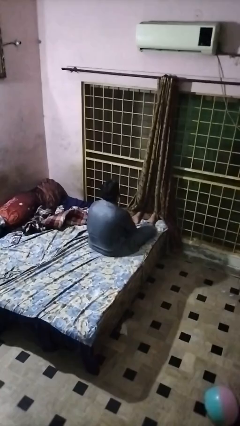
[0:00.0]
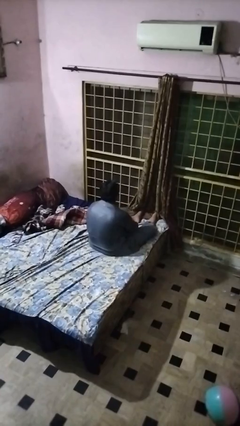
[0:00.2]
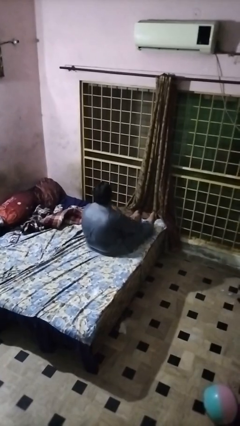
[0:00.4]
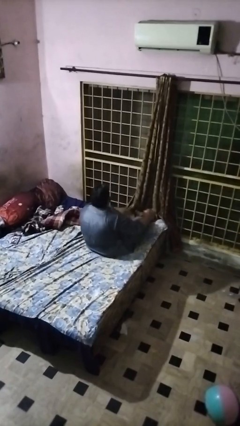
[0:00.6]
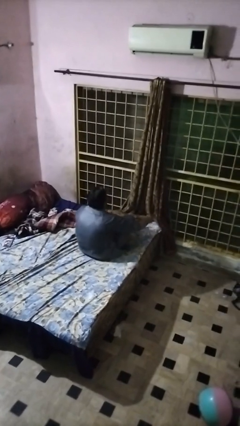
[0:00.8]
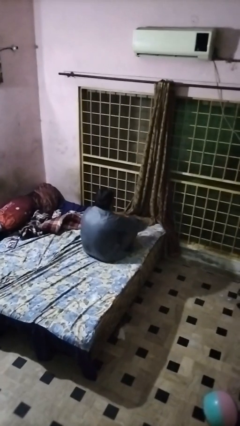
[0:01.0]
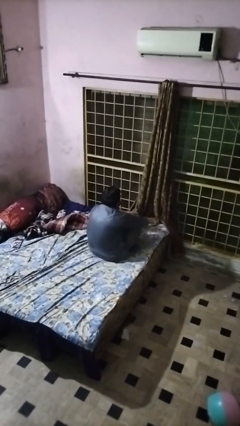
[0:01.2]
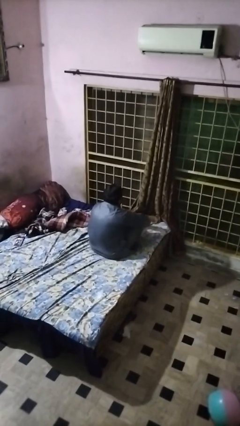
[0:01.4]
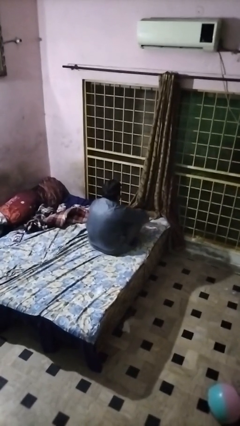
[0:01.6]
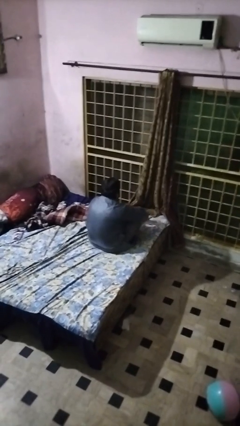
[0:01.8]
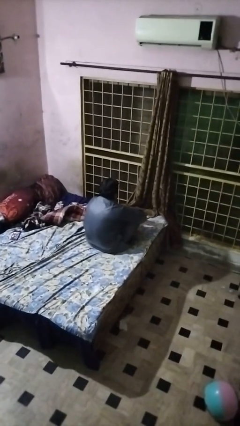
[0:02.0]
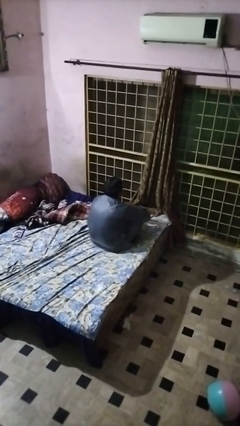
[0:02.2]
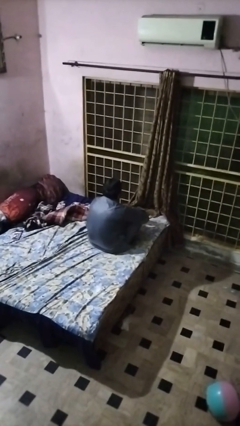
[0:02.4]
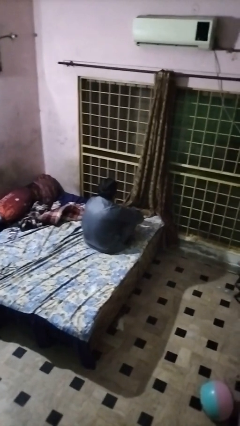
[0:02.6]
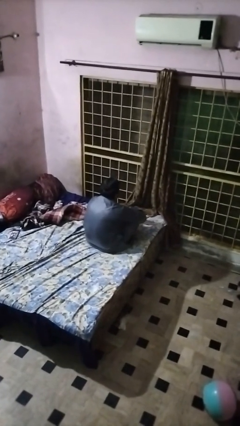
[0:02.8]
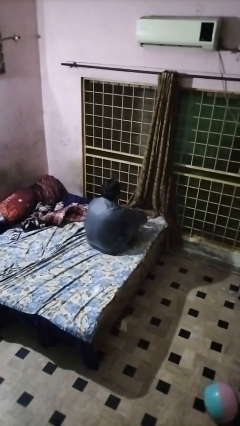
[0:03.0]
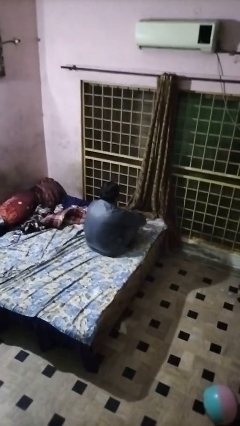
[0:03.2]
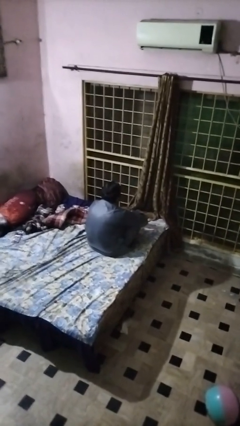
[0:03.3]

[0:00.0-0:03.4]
person crosses legs

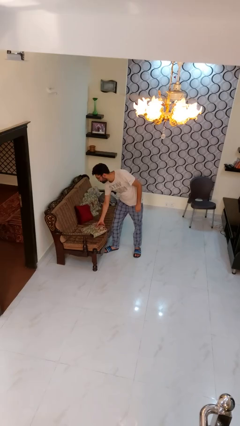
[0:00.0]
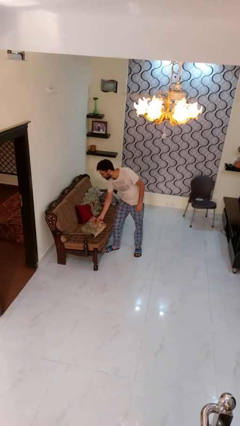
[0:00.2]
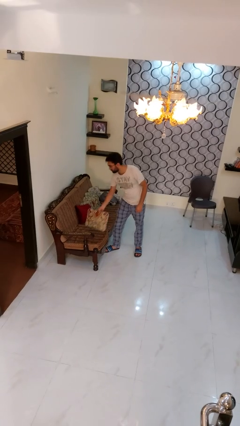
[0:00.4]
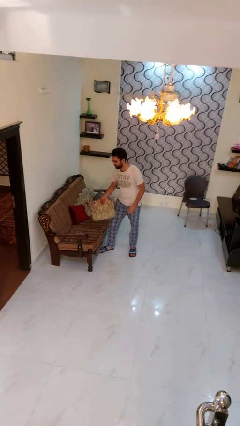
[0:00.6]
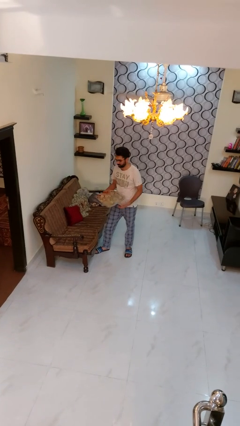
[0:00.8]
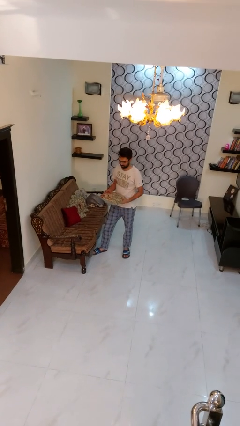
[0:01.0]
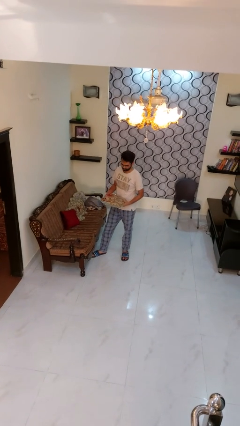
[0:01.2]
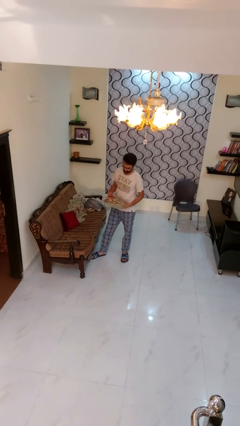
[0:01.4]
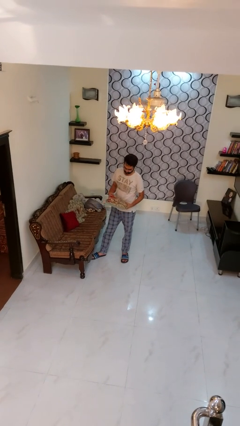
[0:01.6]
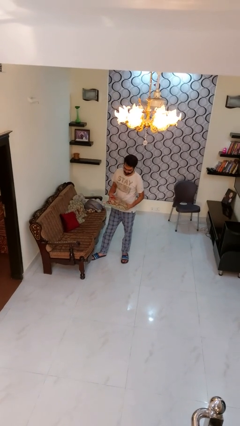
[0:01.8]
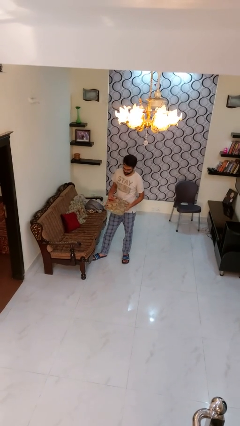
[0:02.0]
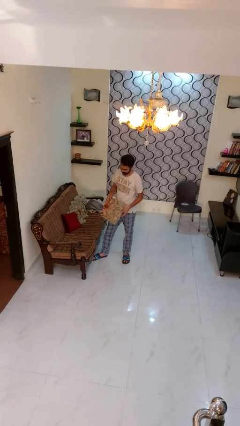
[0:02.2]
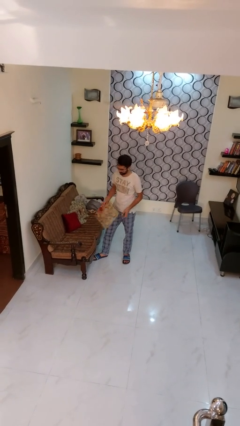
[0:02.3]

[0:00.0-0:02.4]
person picks up object from couch

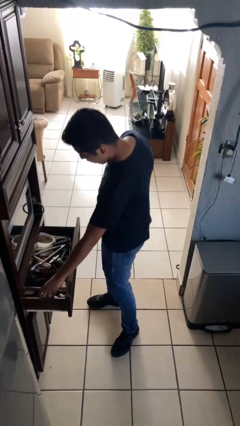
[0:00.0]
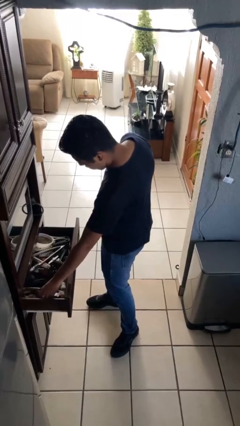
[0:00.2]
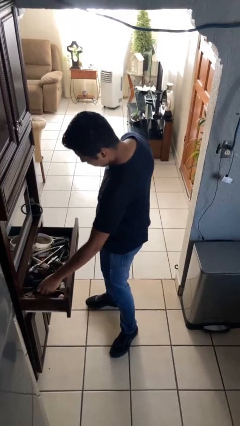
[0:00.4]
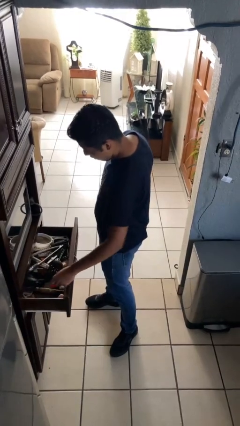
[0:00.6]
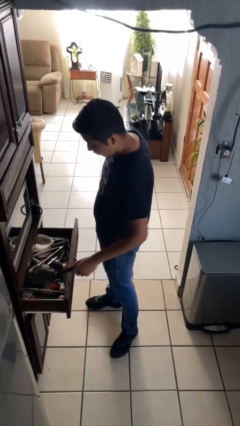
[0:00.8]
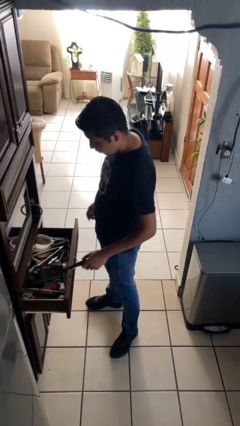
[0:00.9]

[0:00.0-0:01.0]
person takes object from kitchen drawer

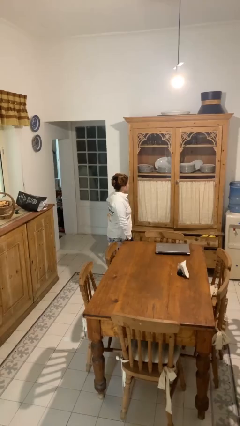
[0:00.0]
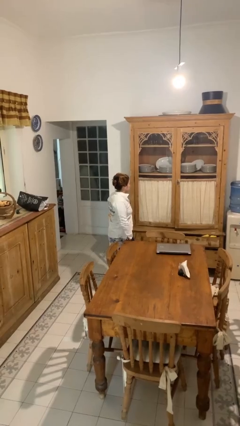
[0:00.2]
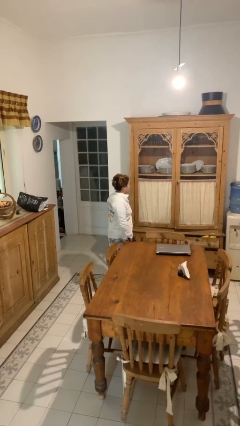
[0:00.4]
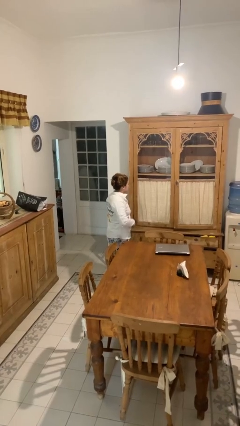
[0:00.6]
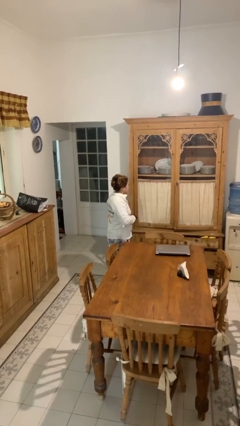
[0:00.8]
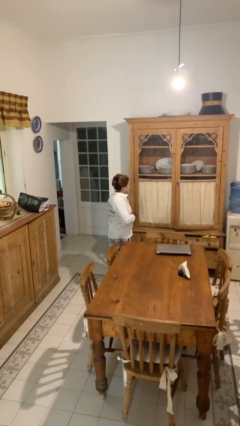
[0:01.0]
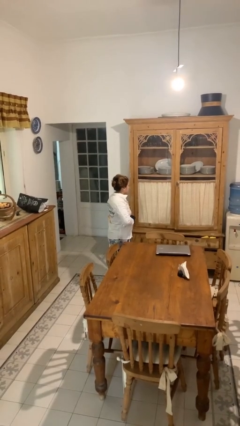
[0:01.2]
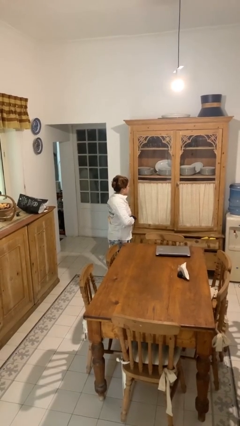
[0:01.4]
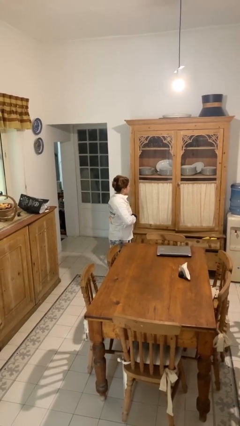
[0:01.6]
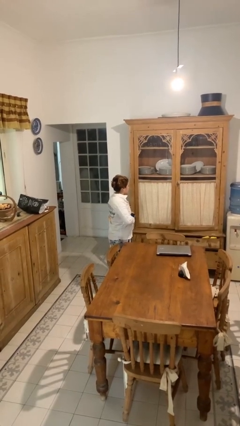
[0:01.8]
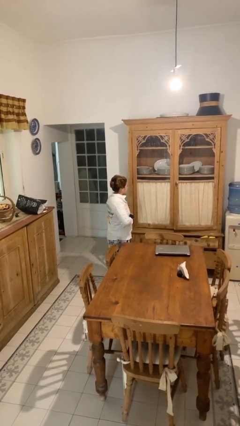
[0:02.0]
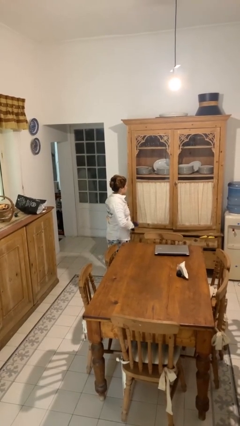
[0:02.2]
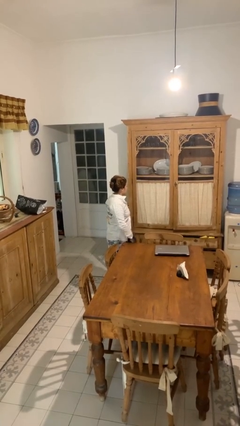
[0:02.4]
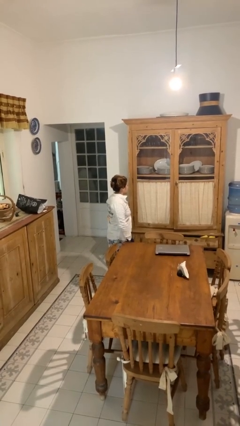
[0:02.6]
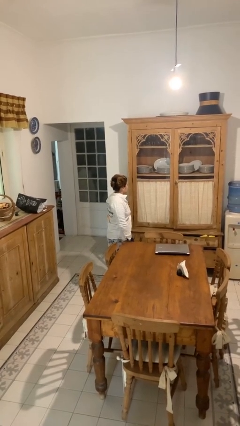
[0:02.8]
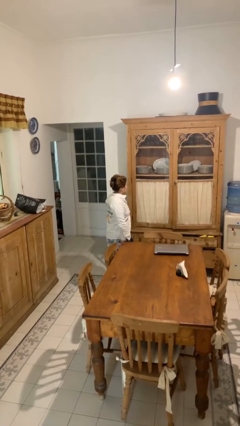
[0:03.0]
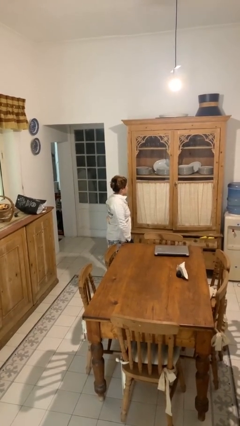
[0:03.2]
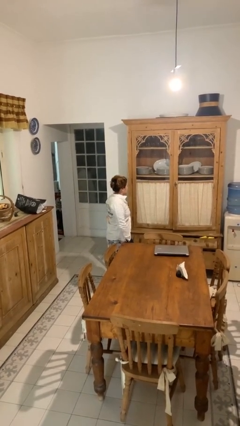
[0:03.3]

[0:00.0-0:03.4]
person unbuttons shirt

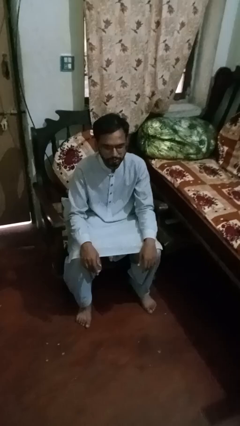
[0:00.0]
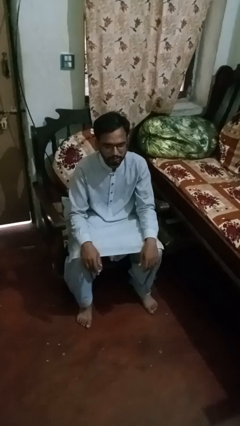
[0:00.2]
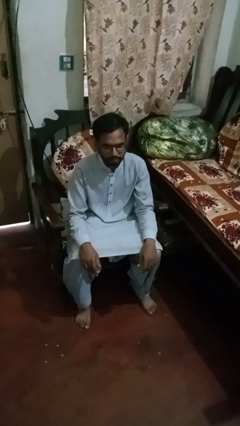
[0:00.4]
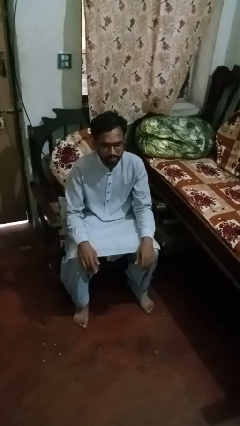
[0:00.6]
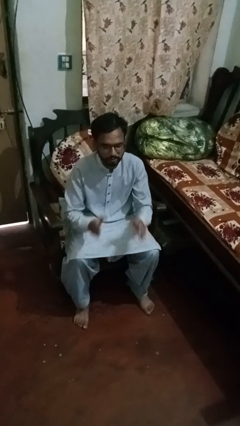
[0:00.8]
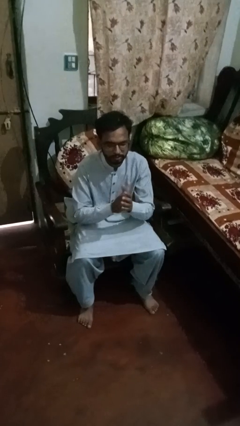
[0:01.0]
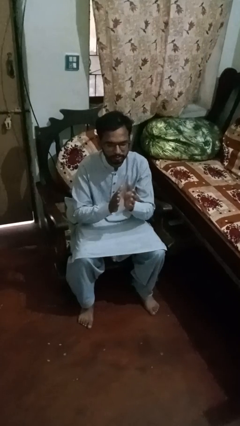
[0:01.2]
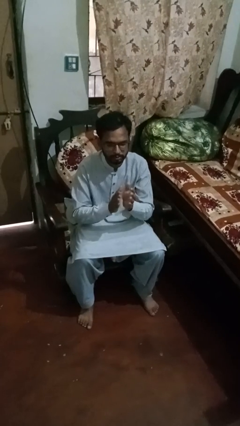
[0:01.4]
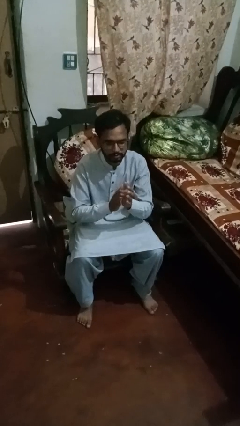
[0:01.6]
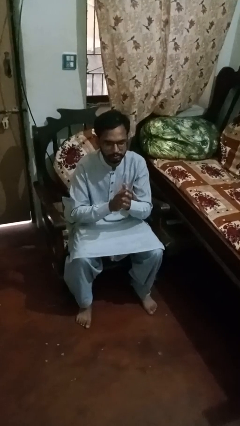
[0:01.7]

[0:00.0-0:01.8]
person claps hands

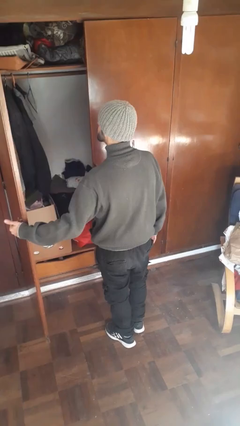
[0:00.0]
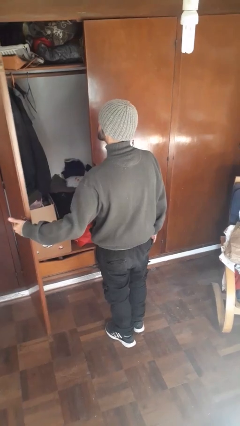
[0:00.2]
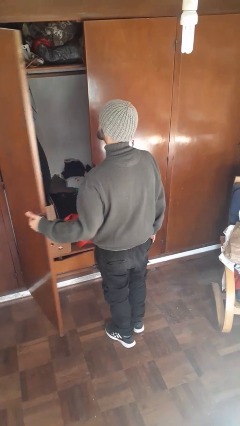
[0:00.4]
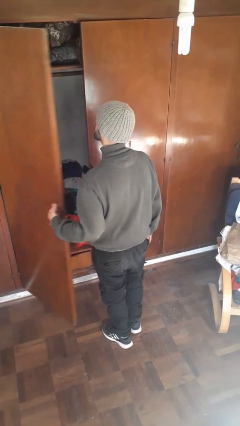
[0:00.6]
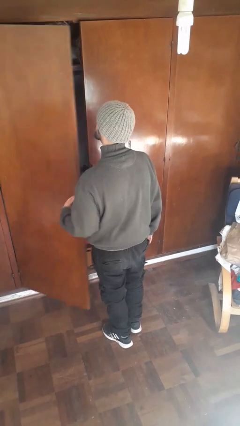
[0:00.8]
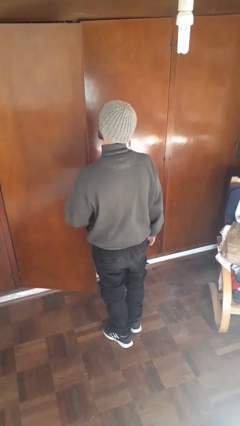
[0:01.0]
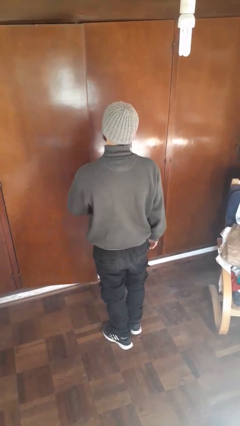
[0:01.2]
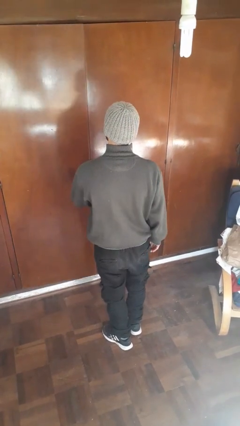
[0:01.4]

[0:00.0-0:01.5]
person closes closet door

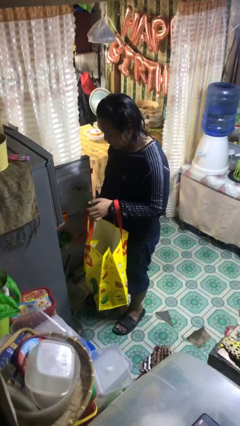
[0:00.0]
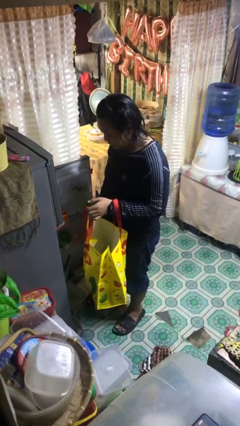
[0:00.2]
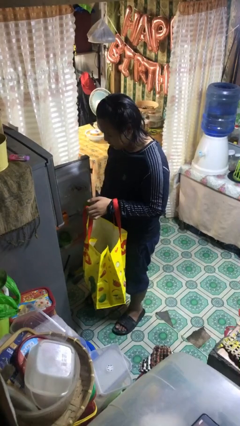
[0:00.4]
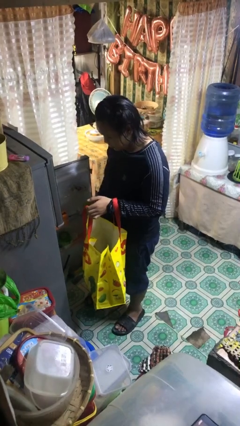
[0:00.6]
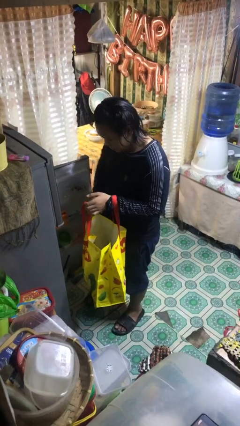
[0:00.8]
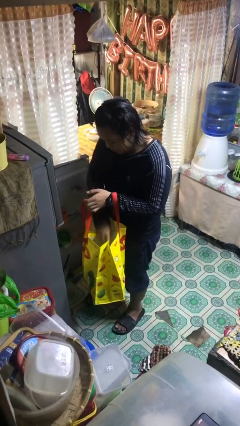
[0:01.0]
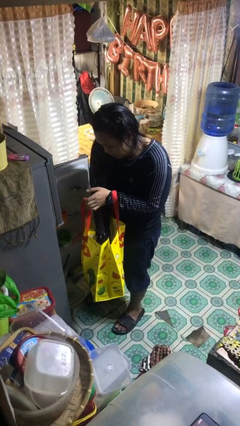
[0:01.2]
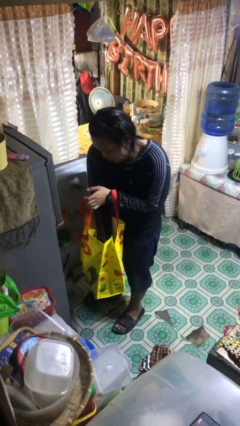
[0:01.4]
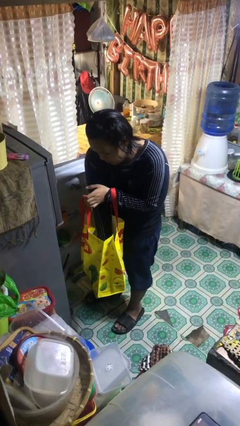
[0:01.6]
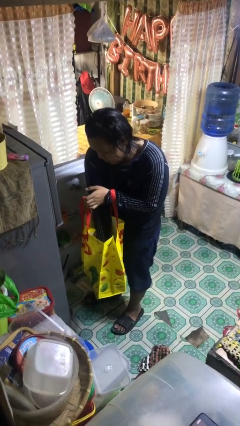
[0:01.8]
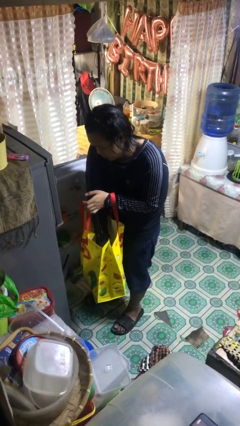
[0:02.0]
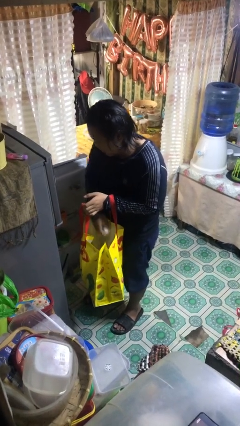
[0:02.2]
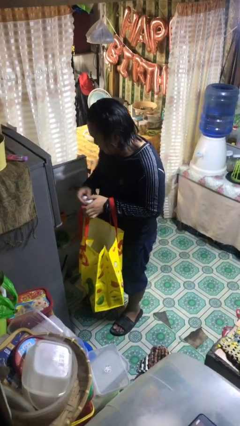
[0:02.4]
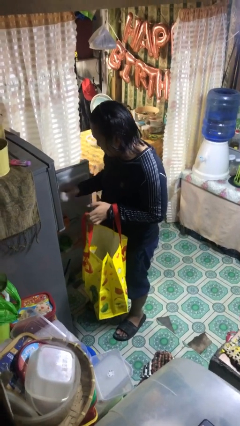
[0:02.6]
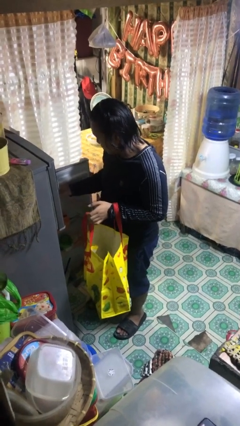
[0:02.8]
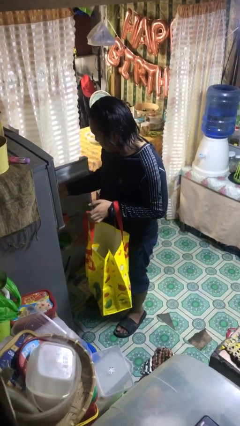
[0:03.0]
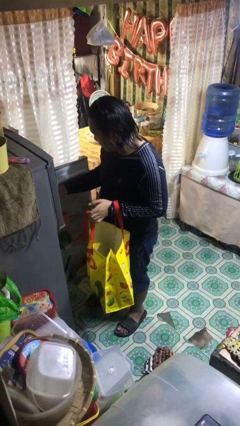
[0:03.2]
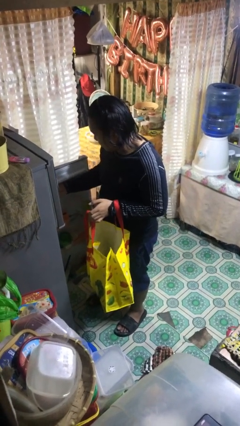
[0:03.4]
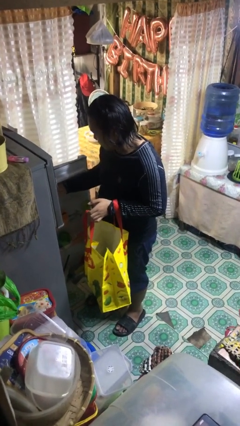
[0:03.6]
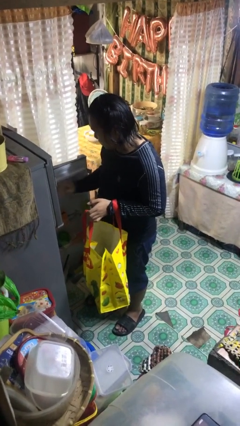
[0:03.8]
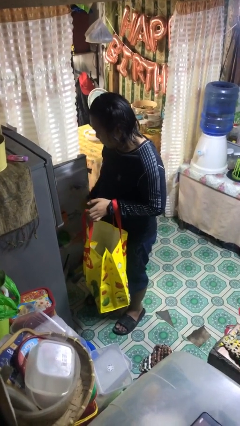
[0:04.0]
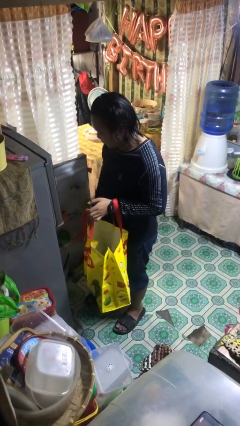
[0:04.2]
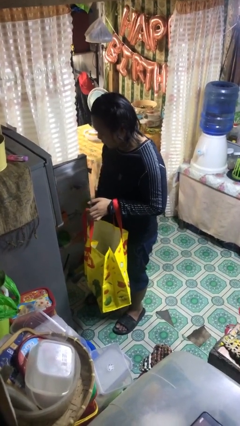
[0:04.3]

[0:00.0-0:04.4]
person loads groceries into refrigerator
